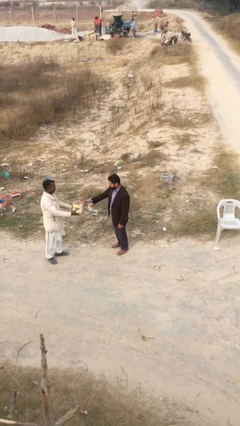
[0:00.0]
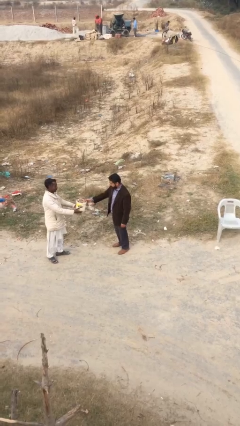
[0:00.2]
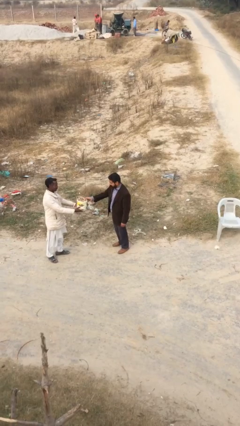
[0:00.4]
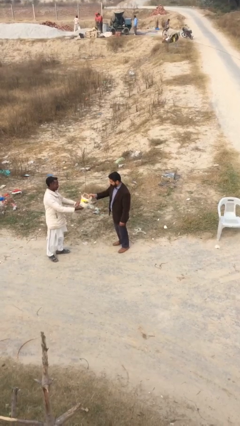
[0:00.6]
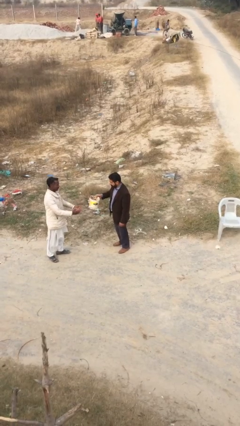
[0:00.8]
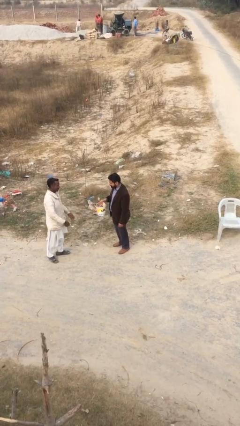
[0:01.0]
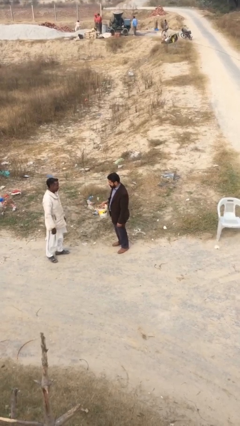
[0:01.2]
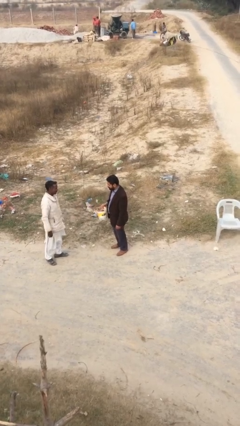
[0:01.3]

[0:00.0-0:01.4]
person transfers object to person

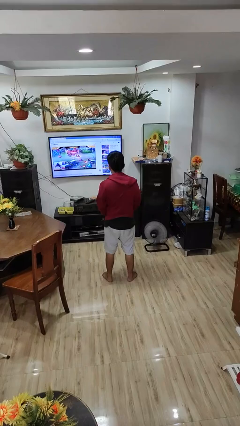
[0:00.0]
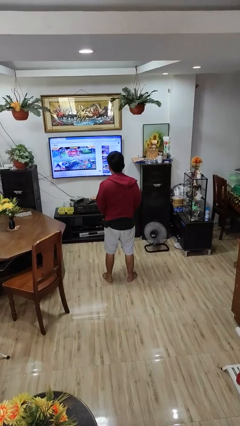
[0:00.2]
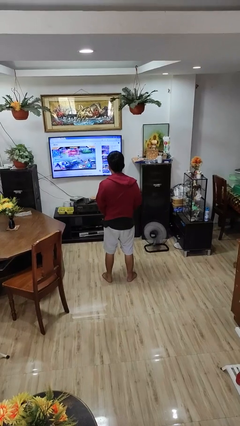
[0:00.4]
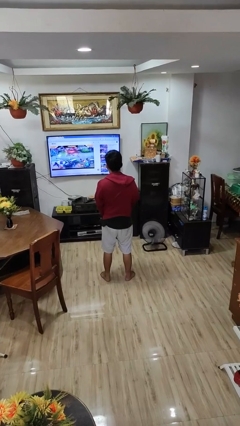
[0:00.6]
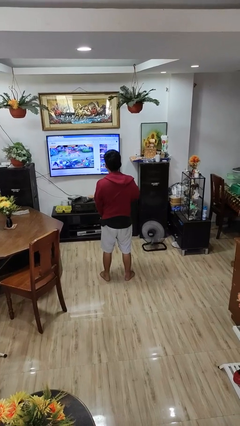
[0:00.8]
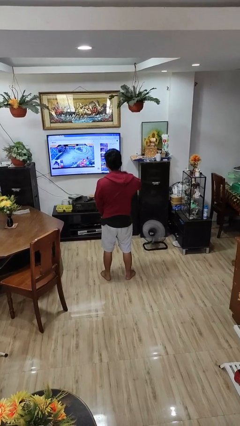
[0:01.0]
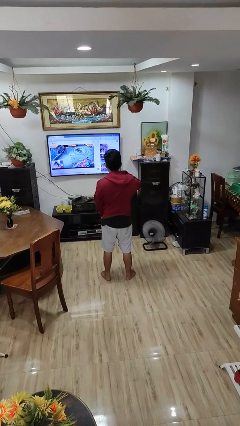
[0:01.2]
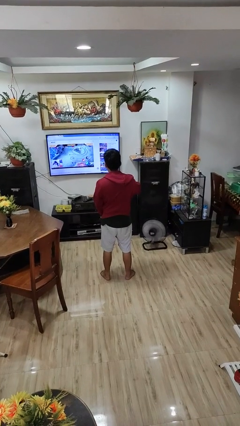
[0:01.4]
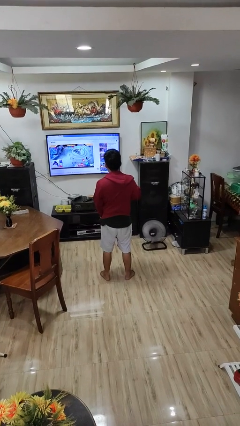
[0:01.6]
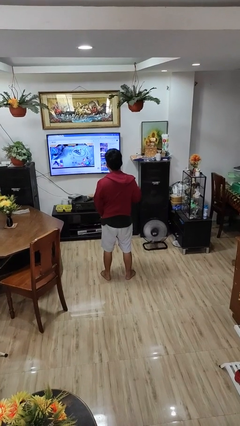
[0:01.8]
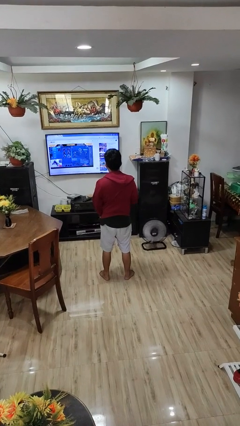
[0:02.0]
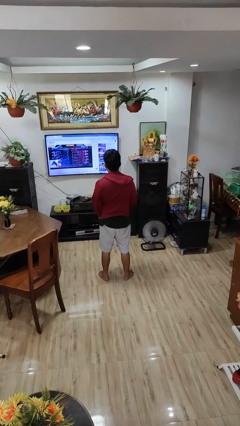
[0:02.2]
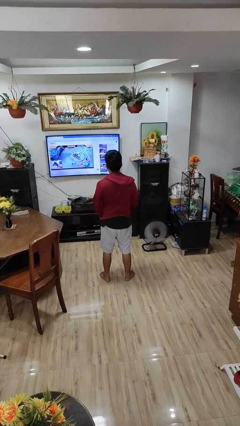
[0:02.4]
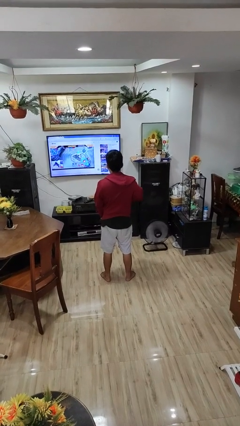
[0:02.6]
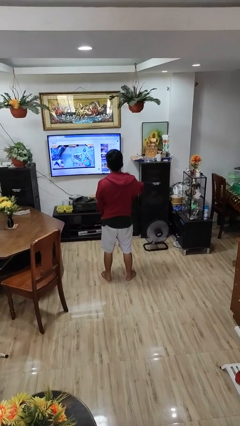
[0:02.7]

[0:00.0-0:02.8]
person zips up jacket

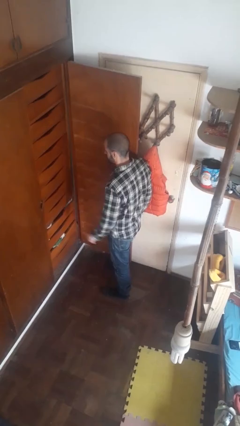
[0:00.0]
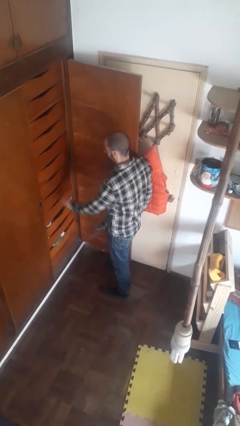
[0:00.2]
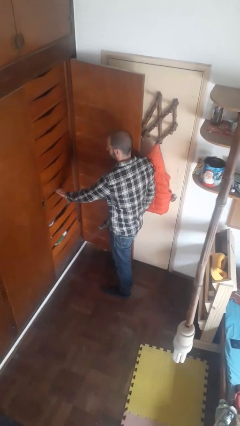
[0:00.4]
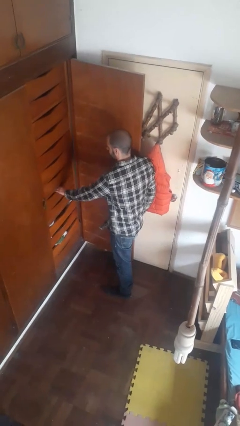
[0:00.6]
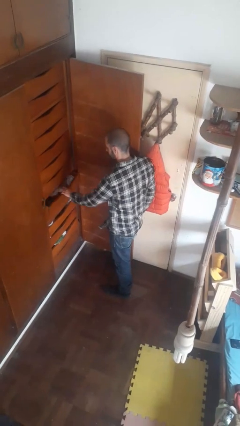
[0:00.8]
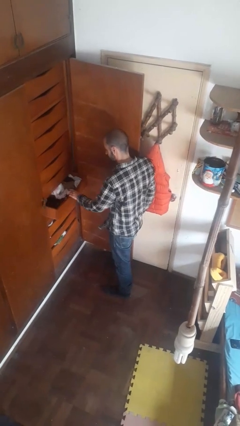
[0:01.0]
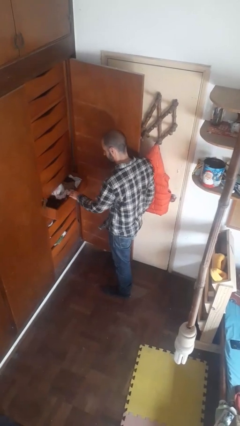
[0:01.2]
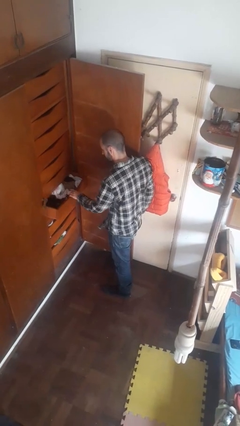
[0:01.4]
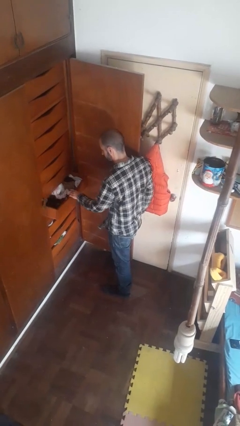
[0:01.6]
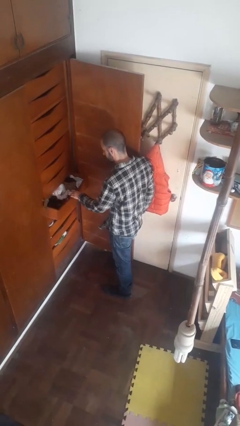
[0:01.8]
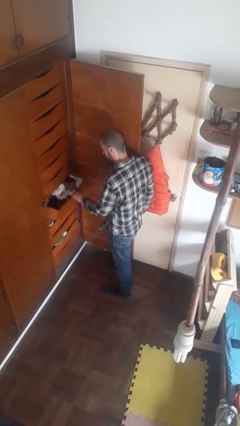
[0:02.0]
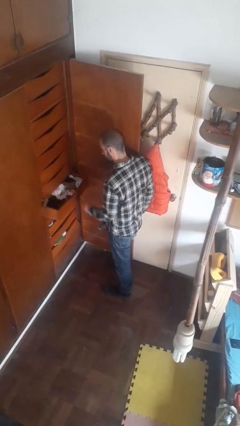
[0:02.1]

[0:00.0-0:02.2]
person opens dresser drawer

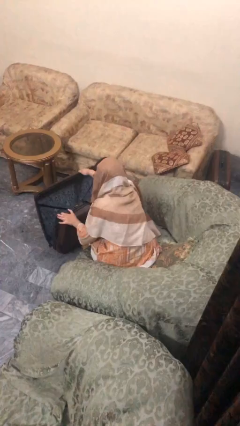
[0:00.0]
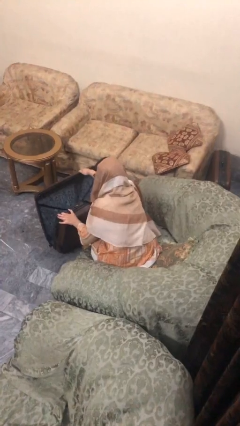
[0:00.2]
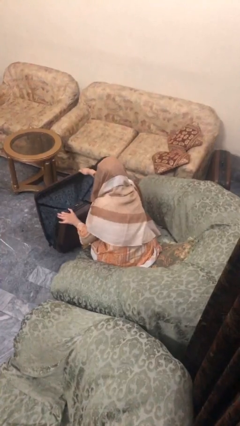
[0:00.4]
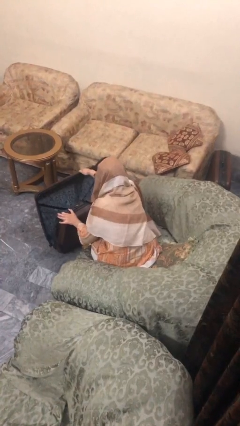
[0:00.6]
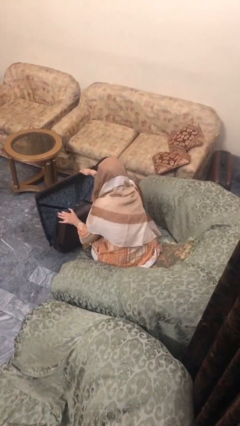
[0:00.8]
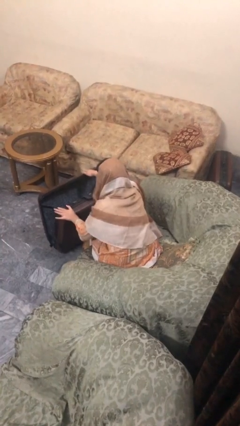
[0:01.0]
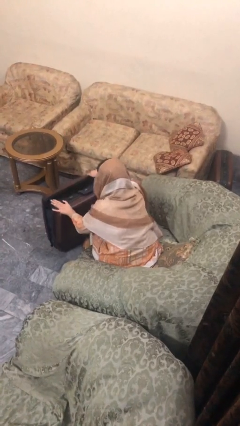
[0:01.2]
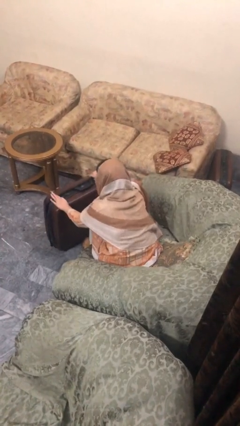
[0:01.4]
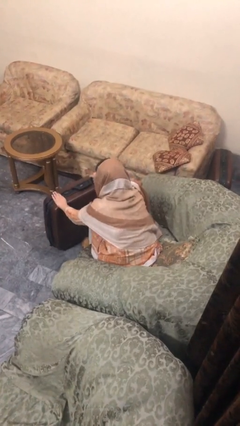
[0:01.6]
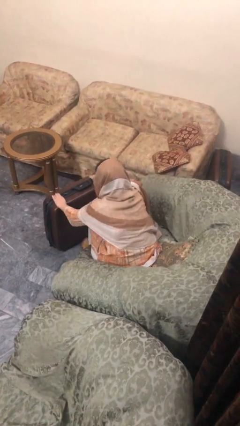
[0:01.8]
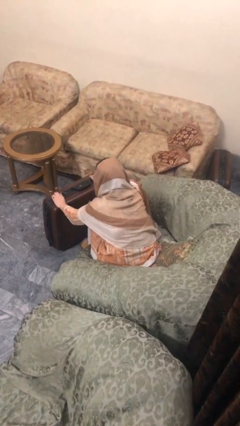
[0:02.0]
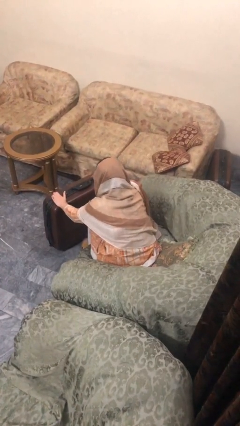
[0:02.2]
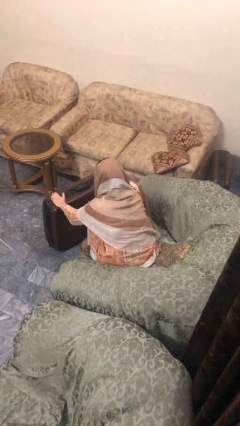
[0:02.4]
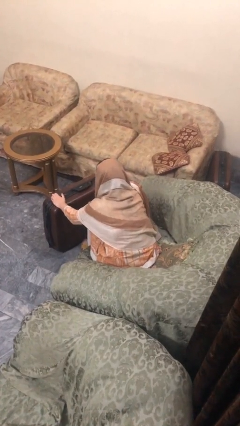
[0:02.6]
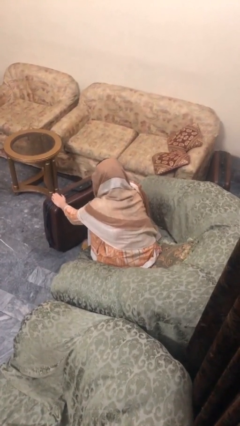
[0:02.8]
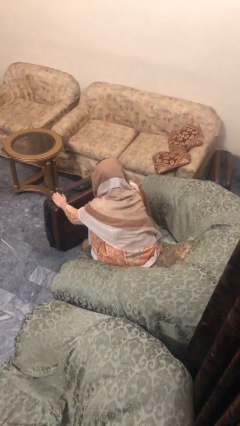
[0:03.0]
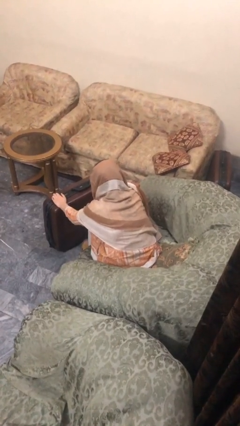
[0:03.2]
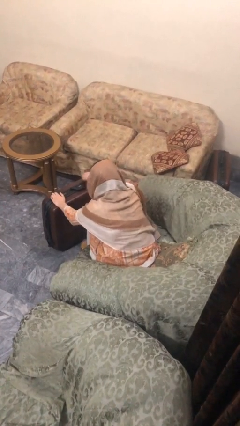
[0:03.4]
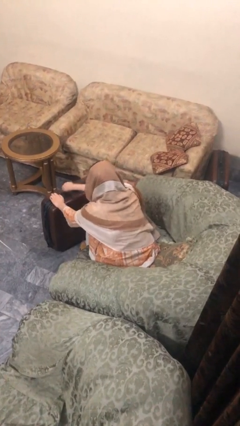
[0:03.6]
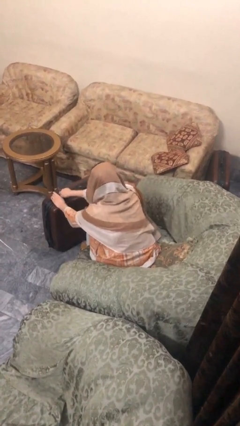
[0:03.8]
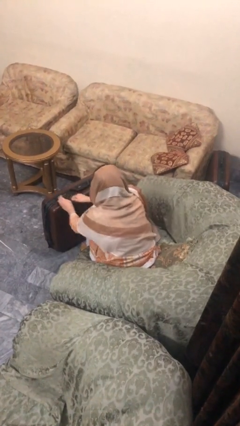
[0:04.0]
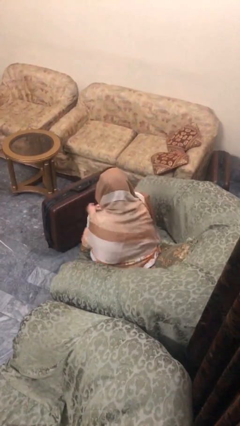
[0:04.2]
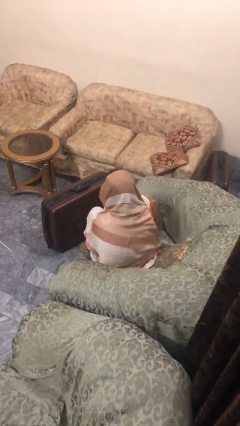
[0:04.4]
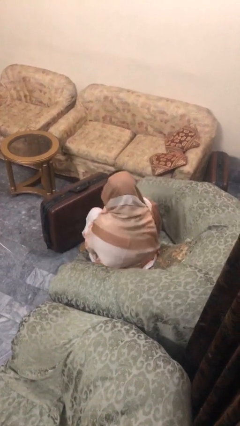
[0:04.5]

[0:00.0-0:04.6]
person closes suitcase

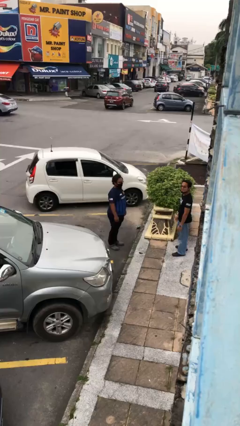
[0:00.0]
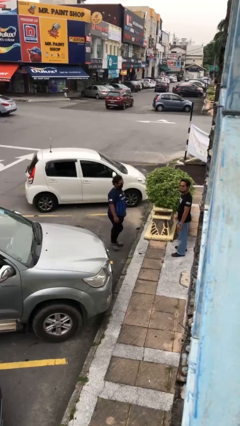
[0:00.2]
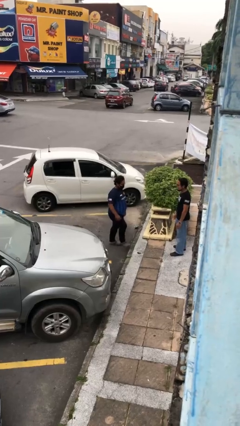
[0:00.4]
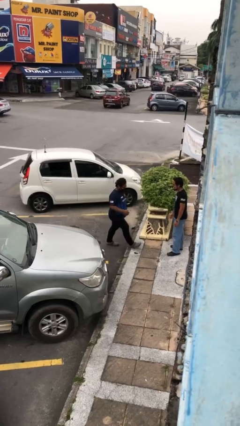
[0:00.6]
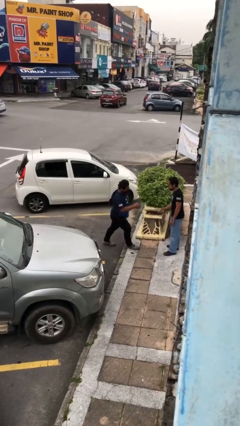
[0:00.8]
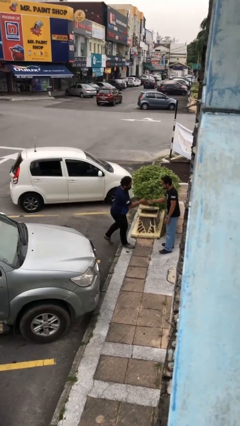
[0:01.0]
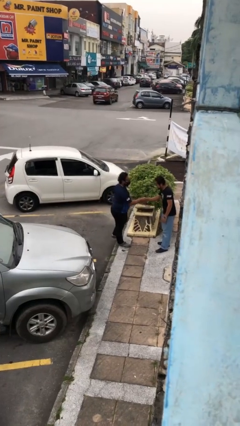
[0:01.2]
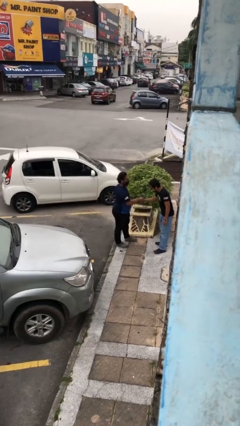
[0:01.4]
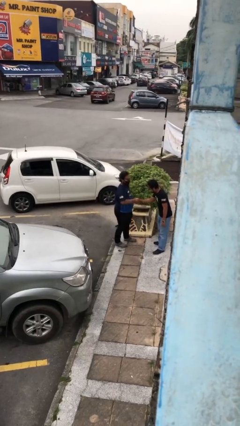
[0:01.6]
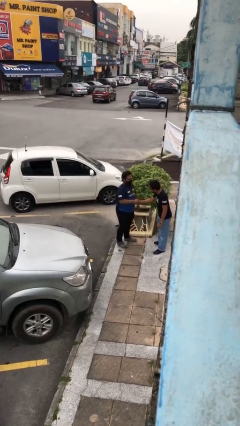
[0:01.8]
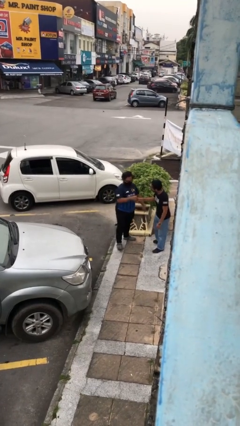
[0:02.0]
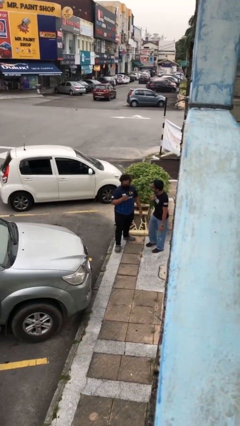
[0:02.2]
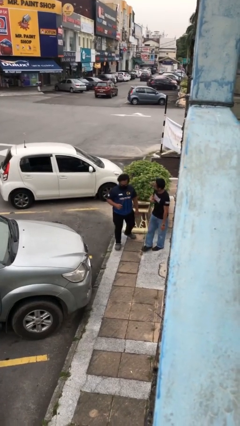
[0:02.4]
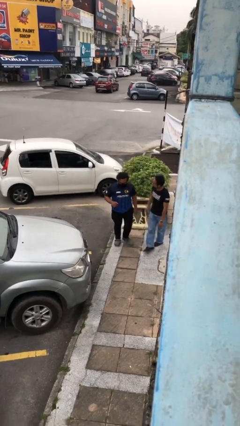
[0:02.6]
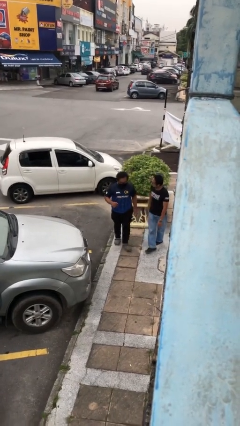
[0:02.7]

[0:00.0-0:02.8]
person shakes hand

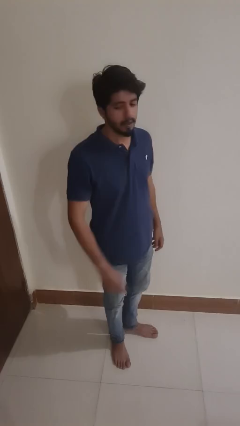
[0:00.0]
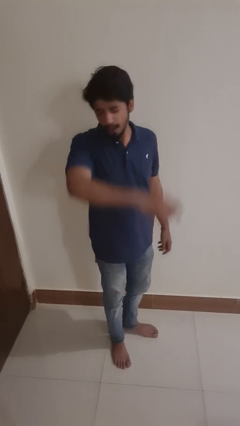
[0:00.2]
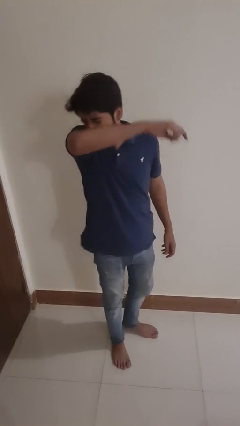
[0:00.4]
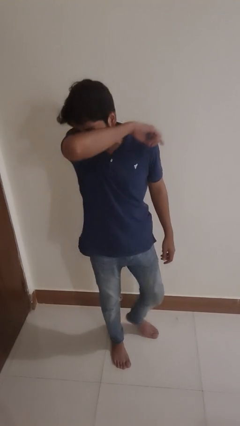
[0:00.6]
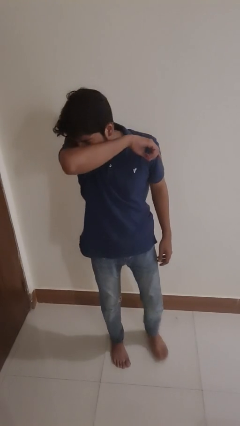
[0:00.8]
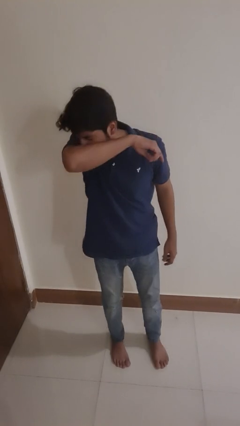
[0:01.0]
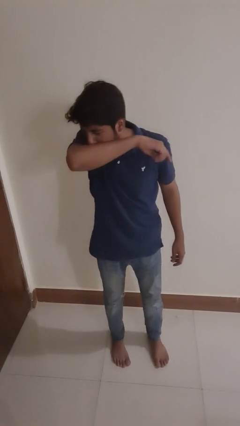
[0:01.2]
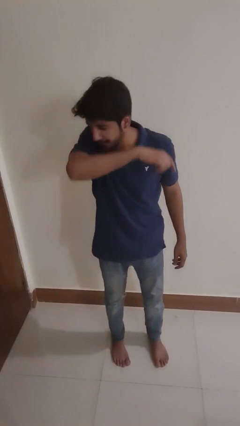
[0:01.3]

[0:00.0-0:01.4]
person sneezes into arm

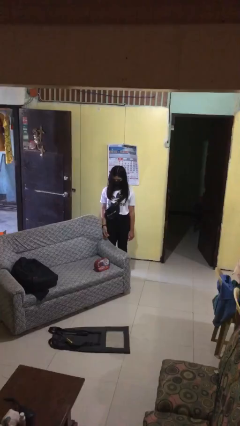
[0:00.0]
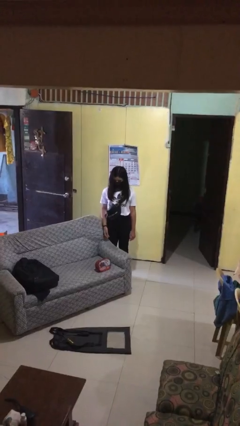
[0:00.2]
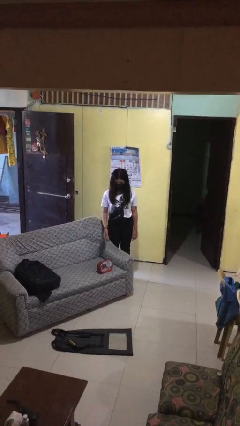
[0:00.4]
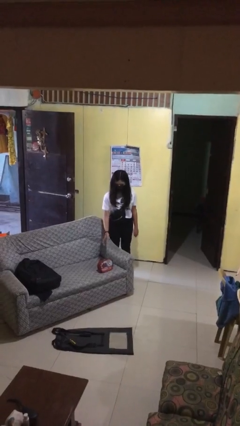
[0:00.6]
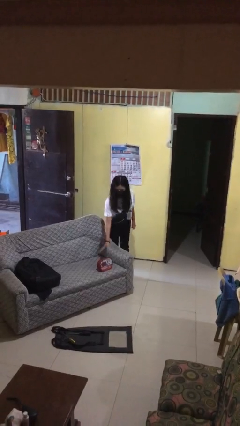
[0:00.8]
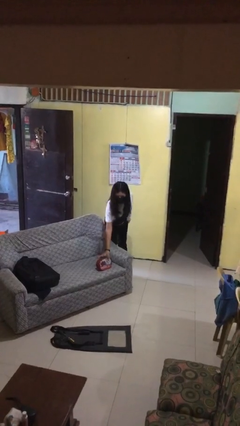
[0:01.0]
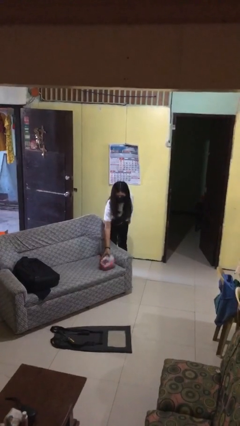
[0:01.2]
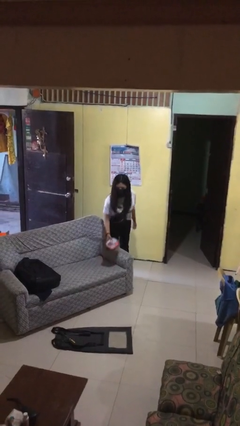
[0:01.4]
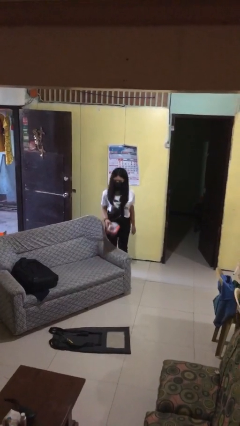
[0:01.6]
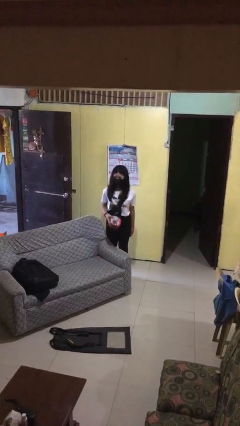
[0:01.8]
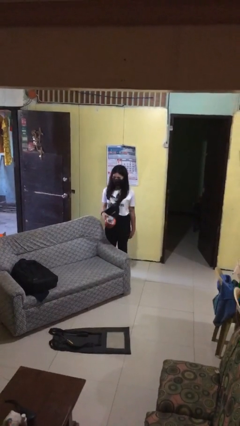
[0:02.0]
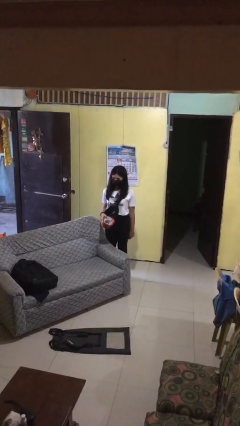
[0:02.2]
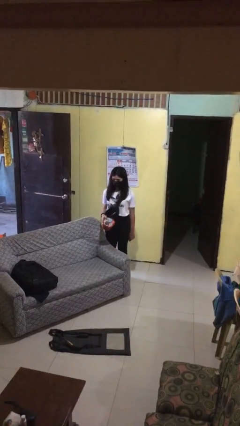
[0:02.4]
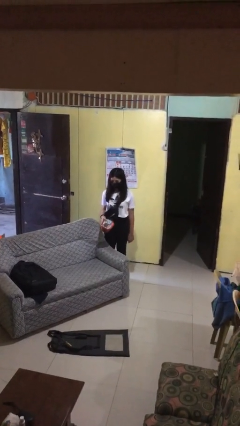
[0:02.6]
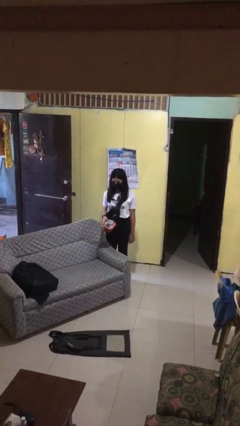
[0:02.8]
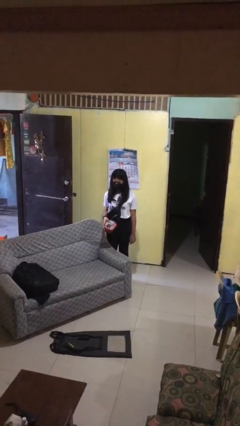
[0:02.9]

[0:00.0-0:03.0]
person picks up object from couch
